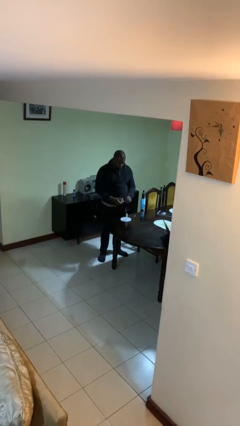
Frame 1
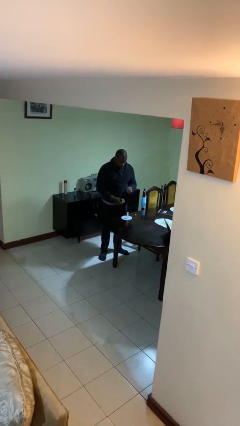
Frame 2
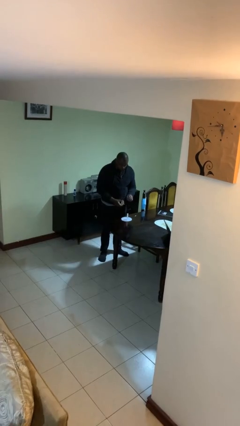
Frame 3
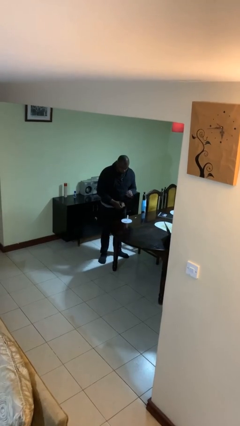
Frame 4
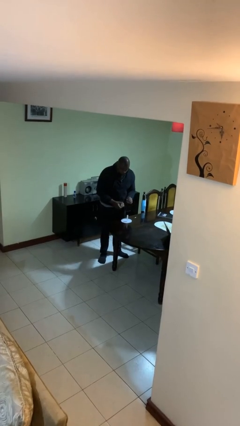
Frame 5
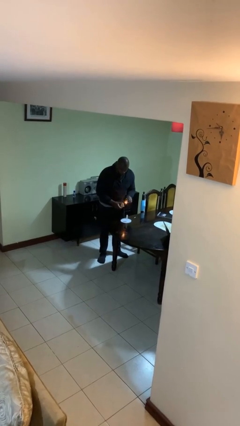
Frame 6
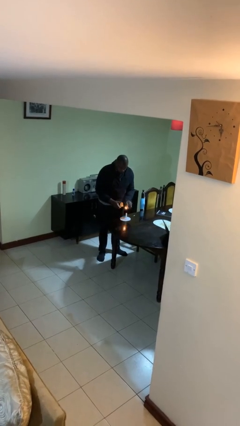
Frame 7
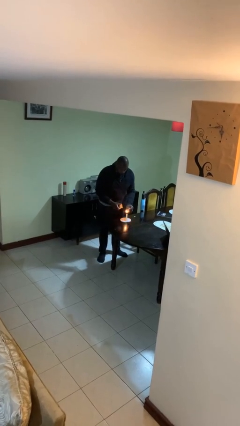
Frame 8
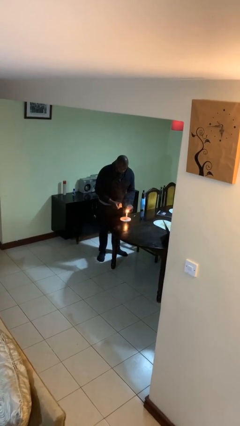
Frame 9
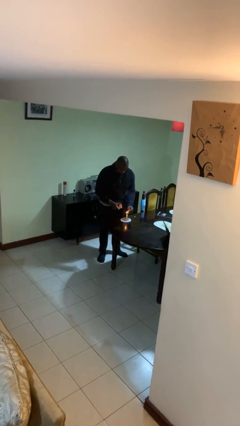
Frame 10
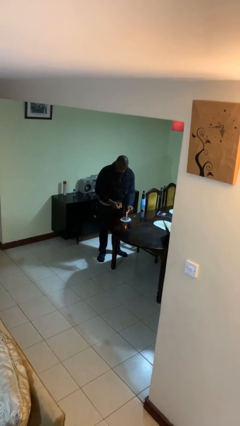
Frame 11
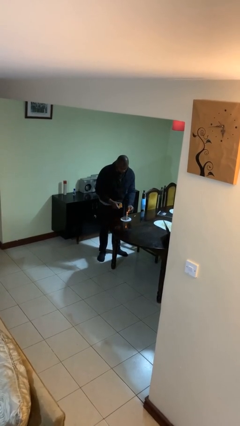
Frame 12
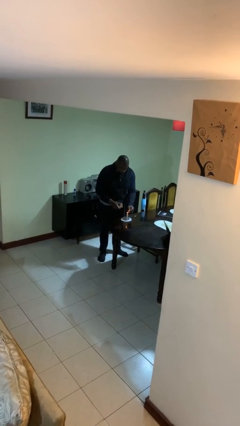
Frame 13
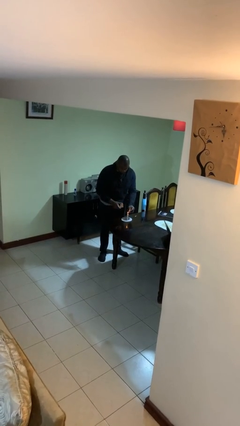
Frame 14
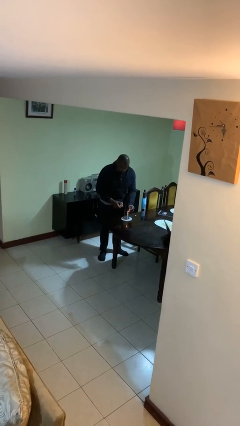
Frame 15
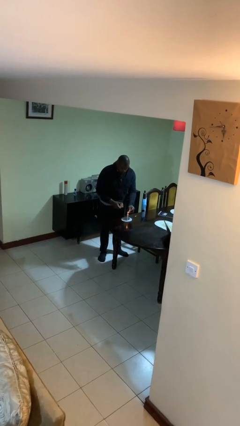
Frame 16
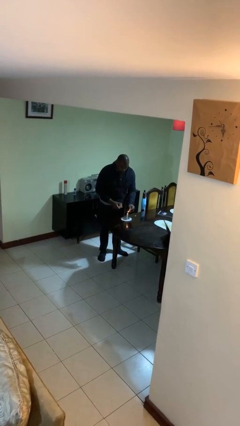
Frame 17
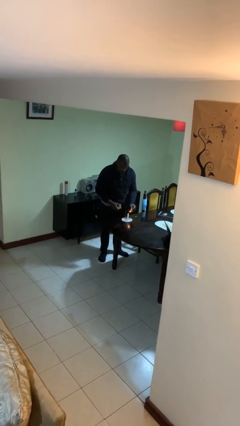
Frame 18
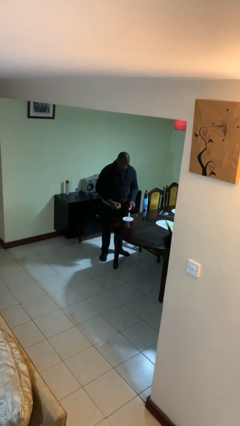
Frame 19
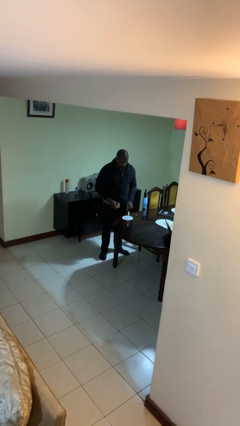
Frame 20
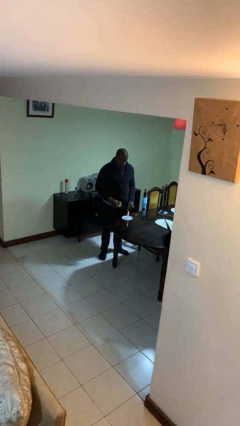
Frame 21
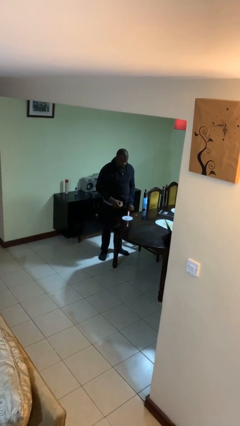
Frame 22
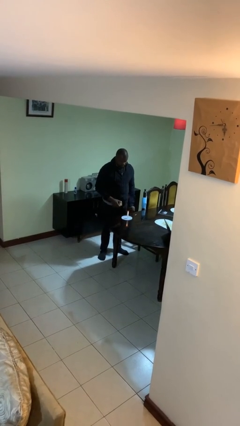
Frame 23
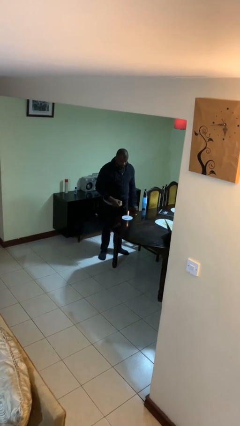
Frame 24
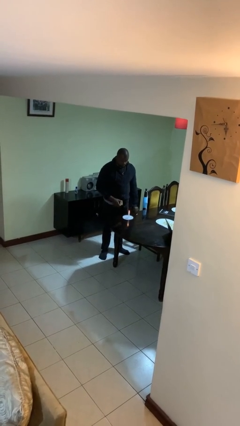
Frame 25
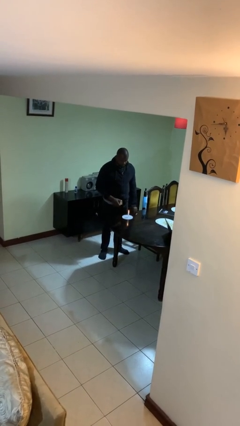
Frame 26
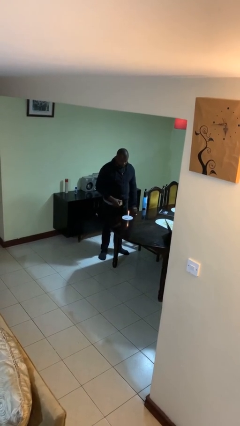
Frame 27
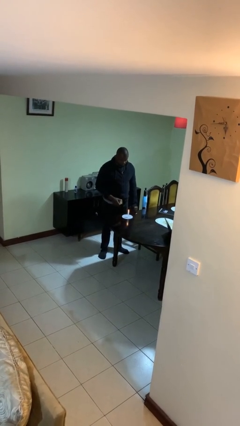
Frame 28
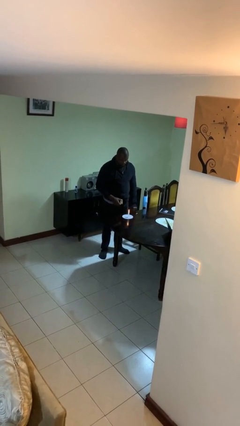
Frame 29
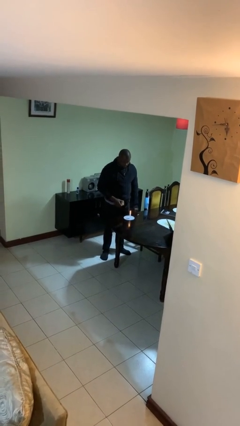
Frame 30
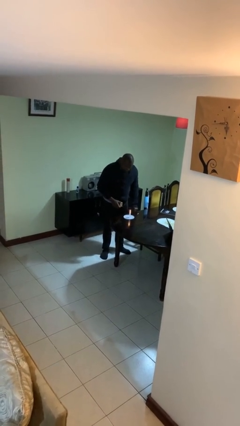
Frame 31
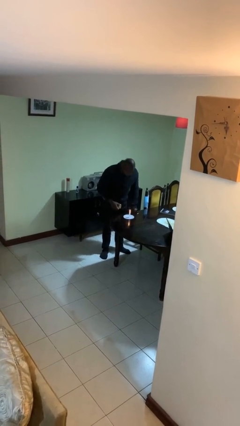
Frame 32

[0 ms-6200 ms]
person lights candle

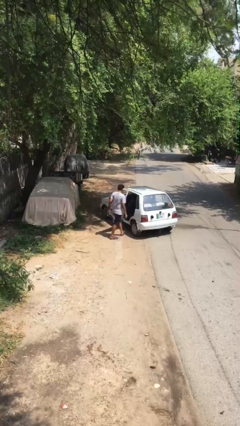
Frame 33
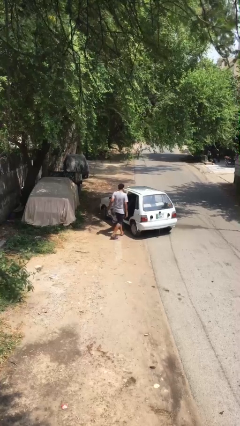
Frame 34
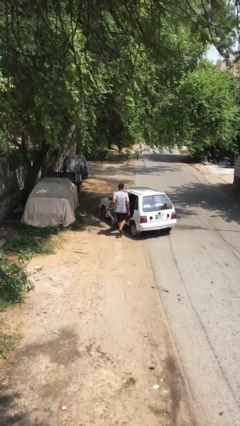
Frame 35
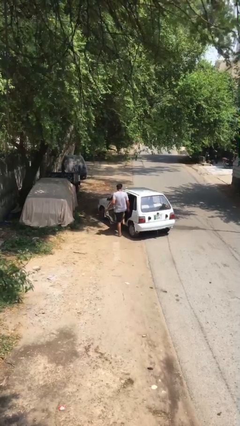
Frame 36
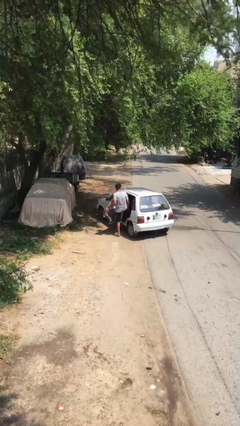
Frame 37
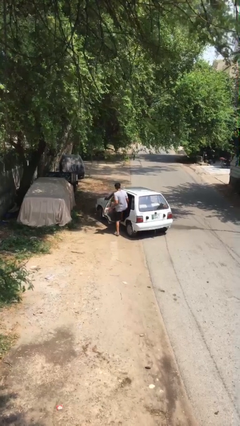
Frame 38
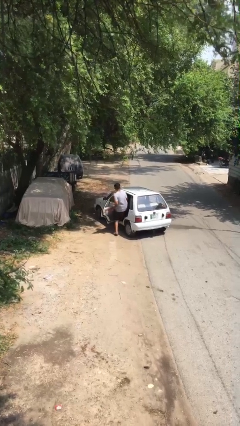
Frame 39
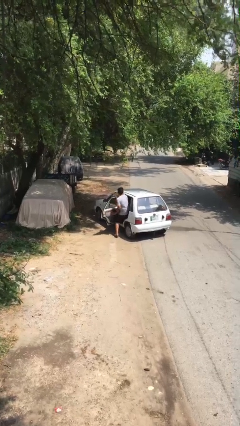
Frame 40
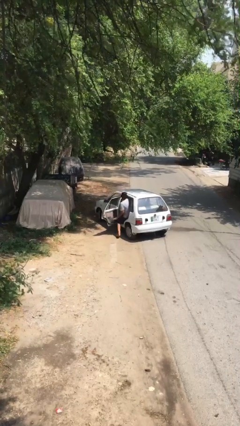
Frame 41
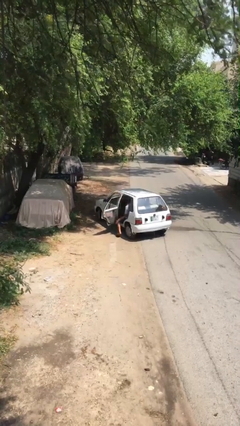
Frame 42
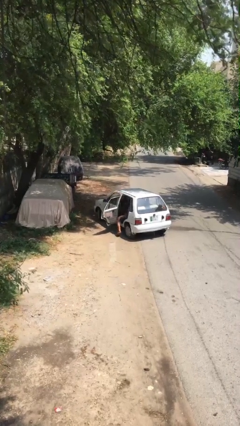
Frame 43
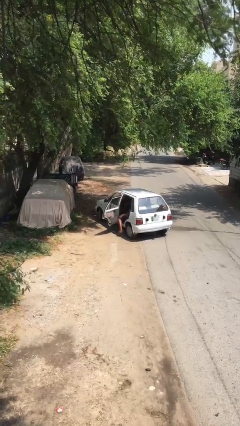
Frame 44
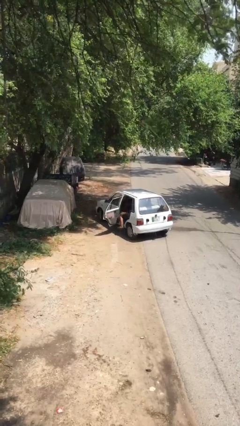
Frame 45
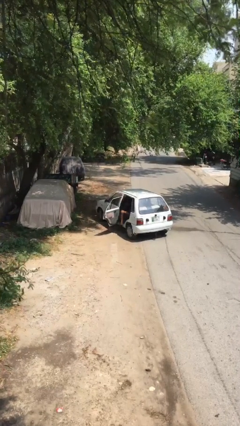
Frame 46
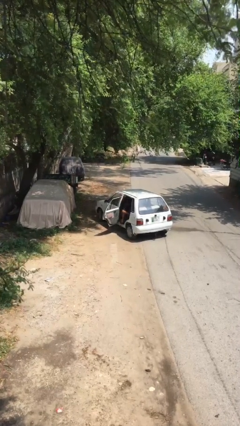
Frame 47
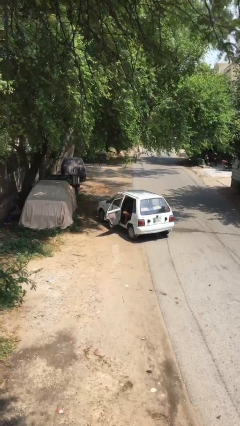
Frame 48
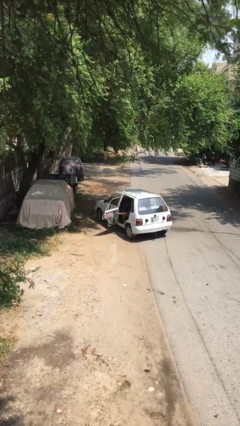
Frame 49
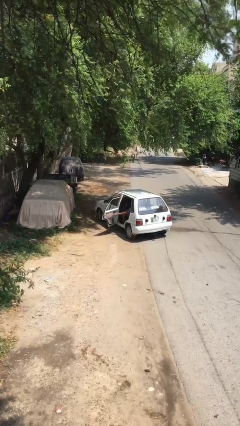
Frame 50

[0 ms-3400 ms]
person enters car

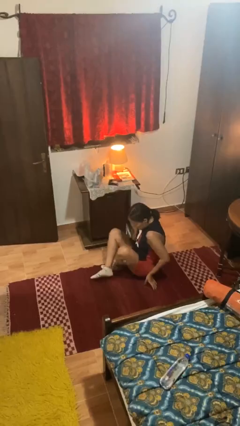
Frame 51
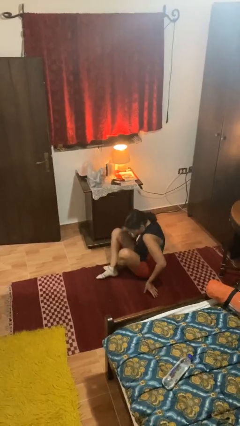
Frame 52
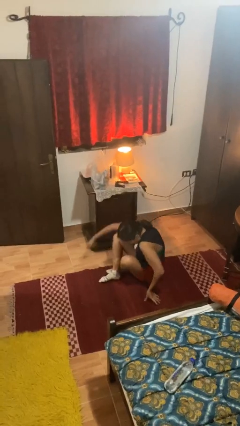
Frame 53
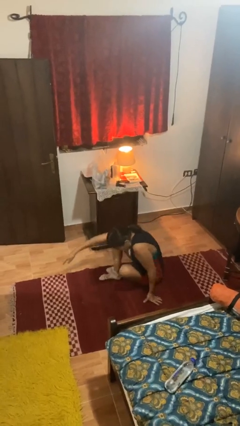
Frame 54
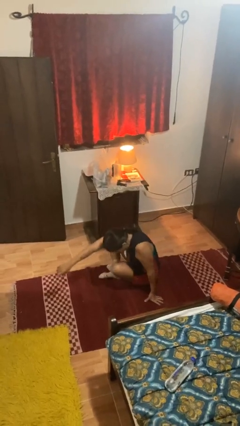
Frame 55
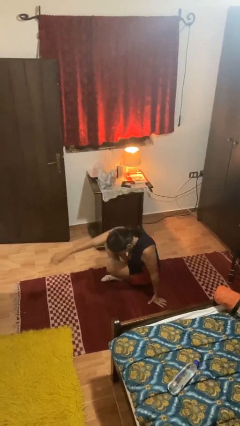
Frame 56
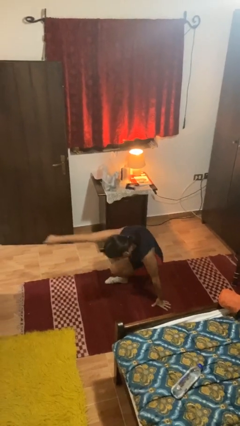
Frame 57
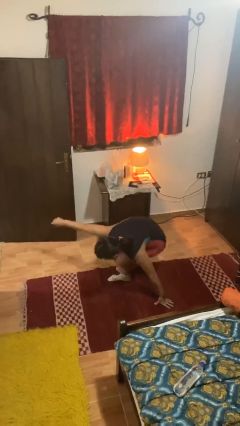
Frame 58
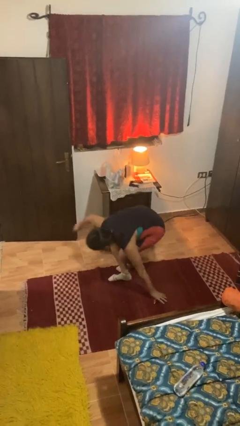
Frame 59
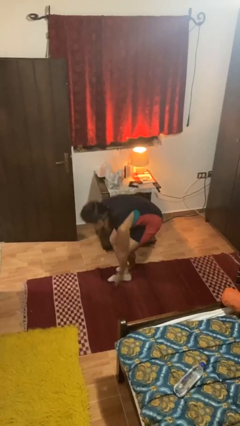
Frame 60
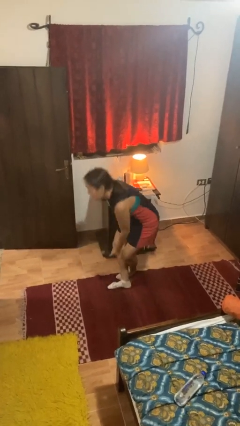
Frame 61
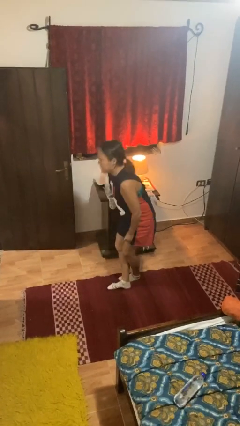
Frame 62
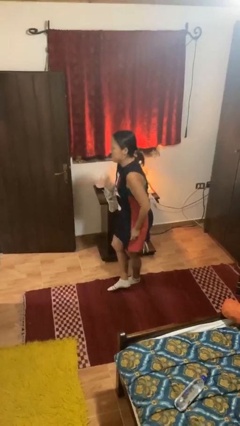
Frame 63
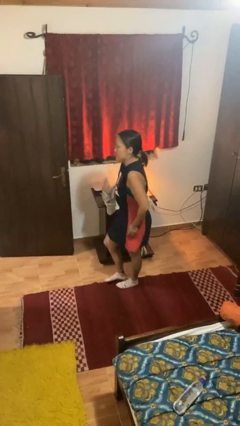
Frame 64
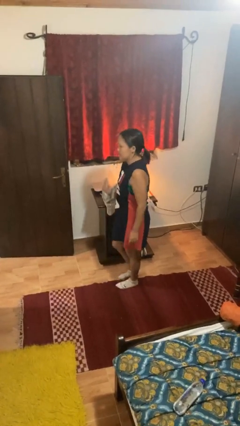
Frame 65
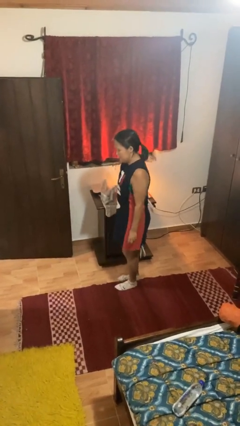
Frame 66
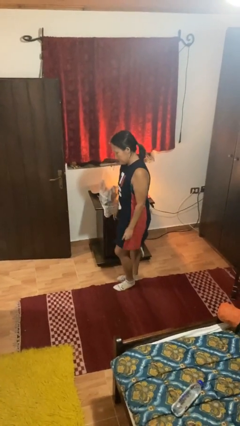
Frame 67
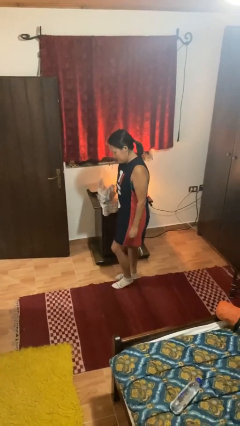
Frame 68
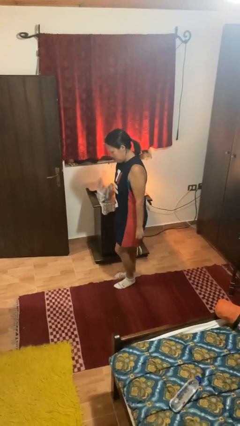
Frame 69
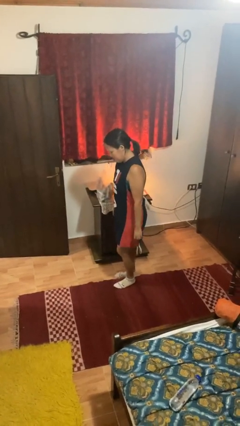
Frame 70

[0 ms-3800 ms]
person stands up from floor

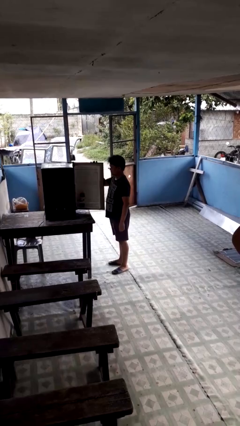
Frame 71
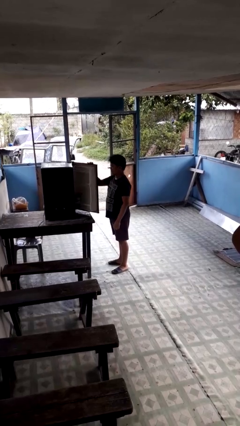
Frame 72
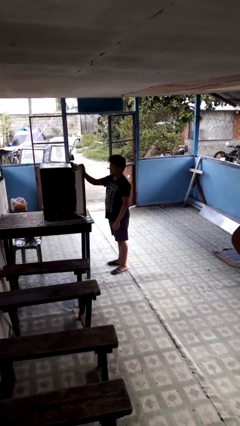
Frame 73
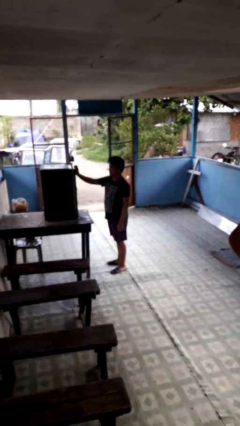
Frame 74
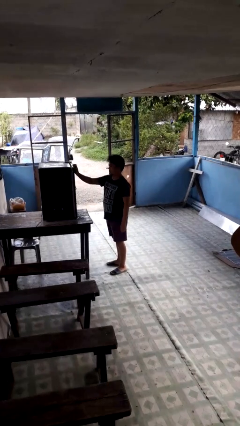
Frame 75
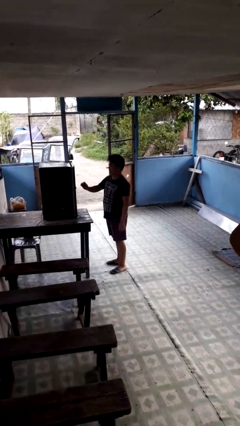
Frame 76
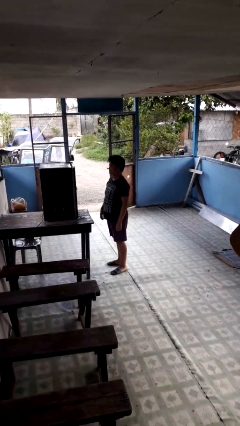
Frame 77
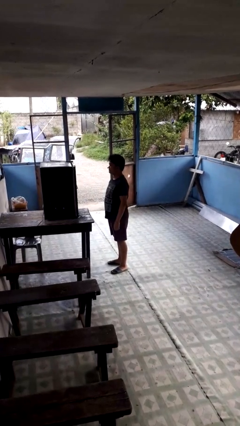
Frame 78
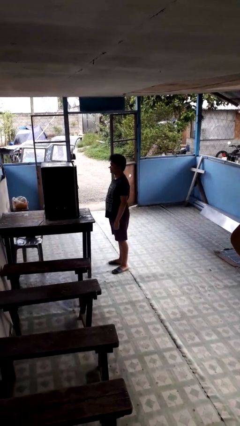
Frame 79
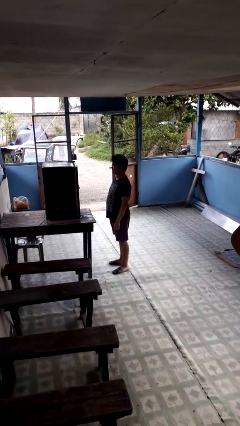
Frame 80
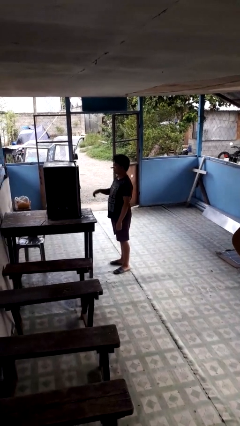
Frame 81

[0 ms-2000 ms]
person closes refrigerator

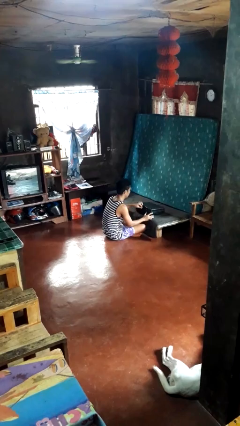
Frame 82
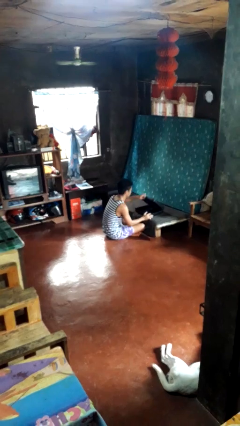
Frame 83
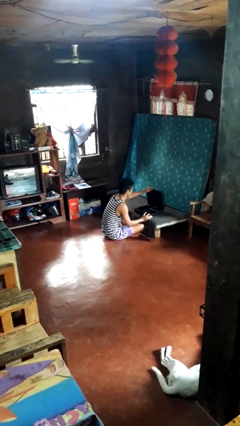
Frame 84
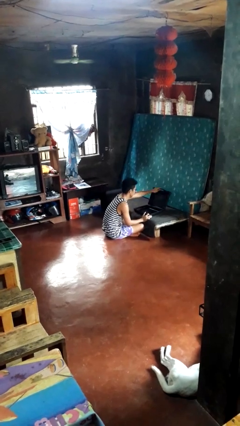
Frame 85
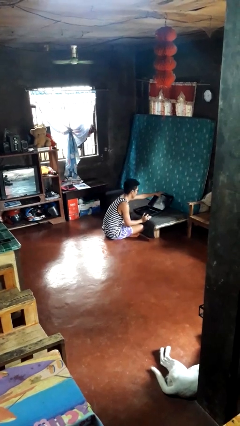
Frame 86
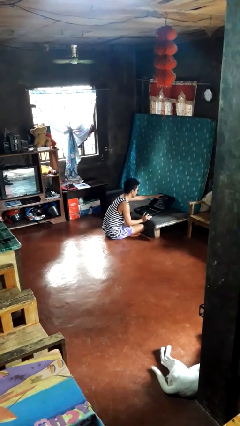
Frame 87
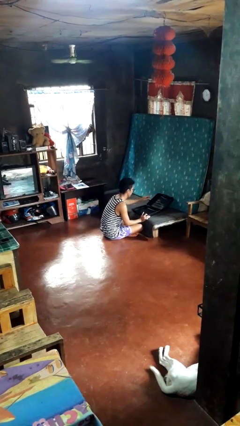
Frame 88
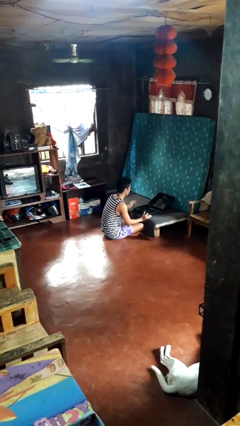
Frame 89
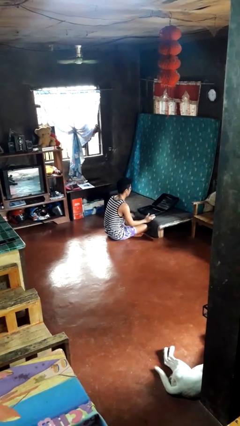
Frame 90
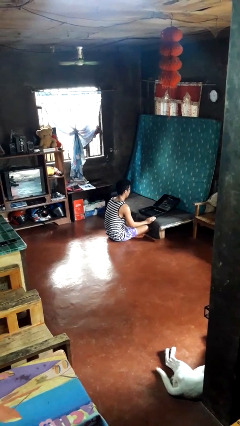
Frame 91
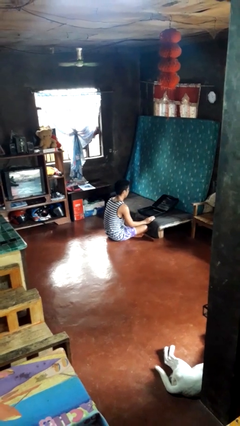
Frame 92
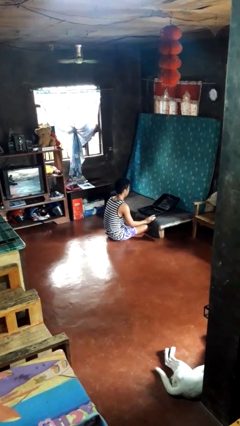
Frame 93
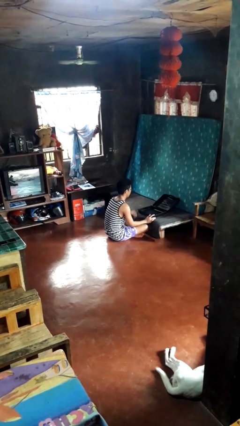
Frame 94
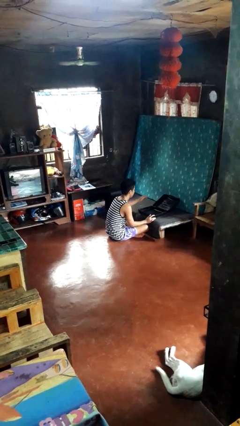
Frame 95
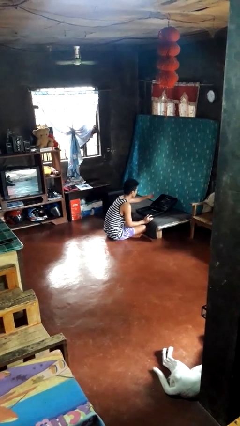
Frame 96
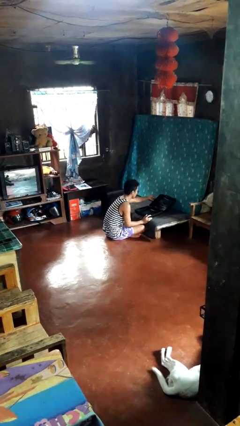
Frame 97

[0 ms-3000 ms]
person opens suitcase
